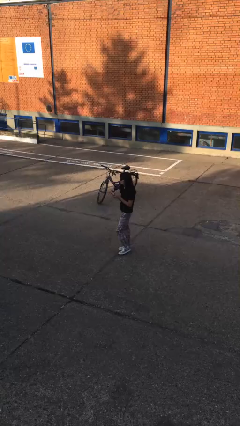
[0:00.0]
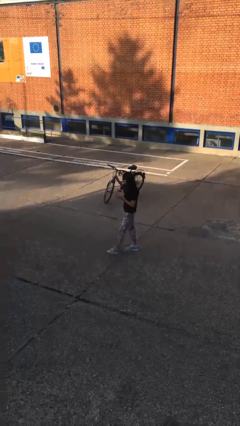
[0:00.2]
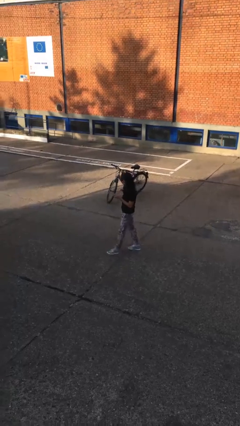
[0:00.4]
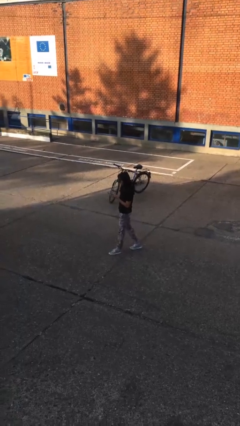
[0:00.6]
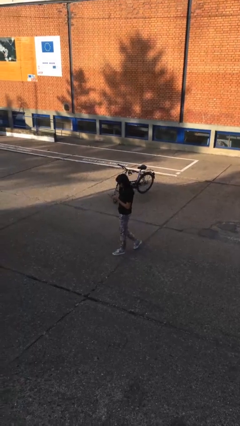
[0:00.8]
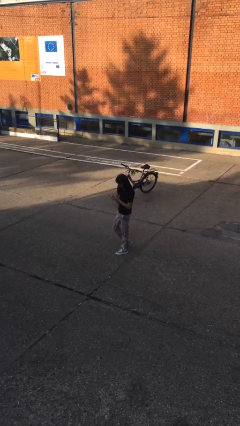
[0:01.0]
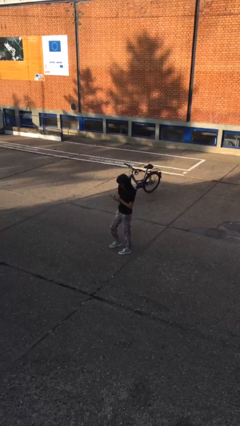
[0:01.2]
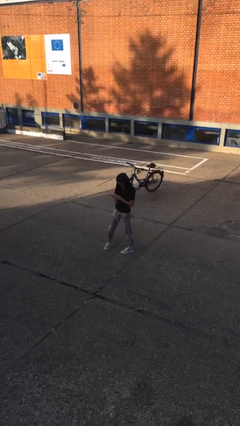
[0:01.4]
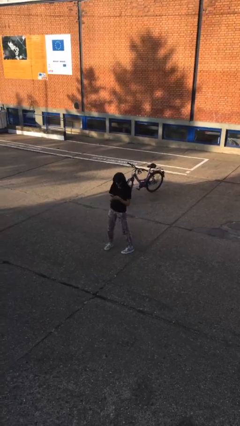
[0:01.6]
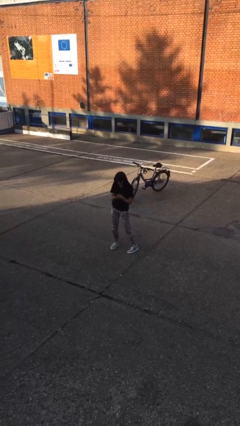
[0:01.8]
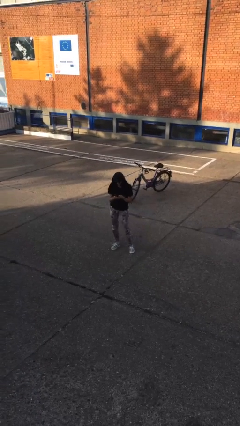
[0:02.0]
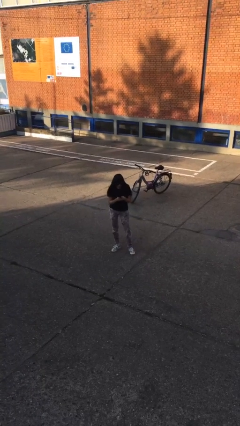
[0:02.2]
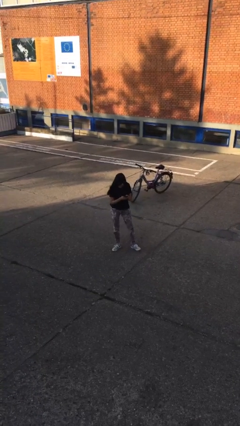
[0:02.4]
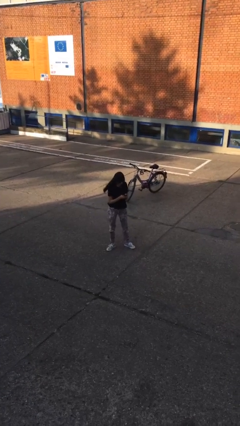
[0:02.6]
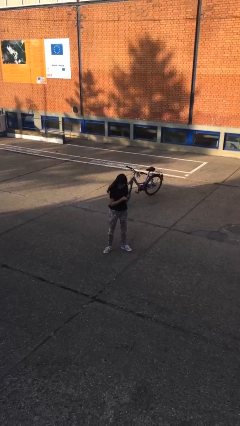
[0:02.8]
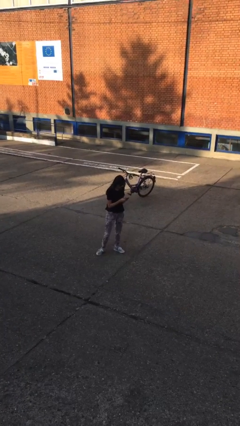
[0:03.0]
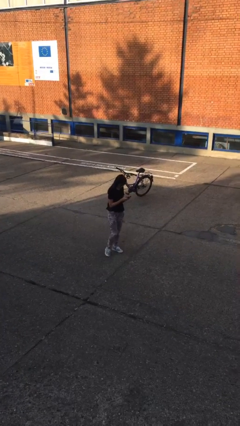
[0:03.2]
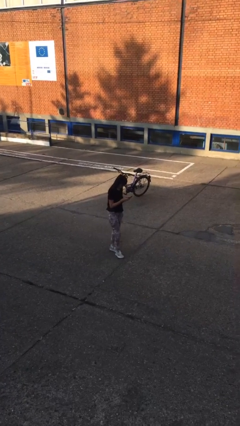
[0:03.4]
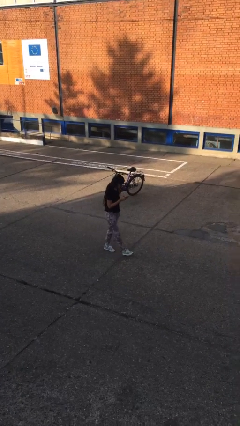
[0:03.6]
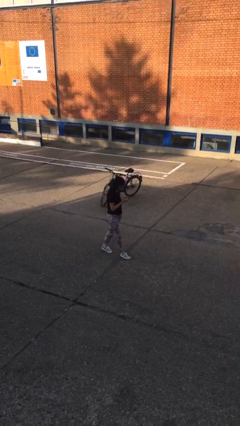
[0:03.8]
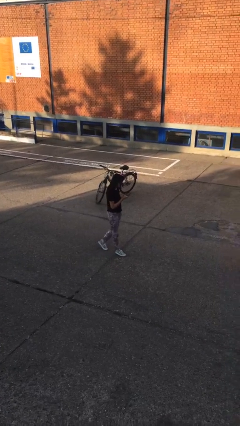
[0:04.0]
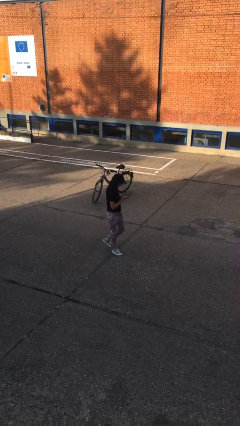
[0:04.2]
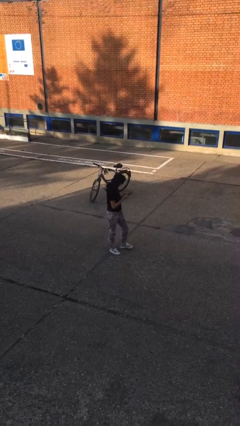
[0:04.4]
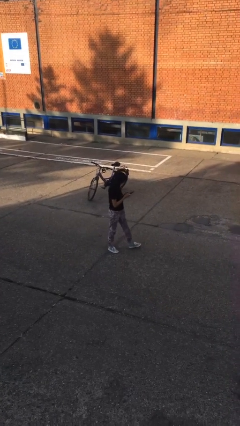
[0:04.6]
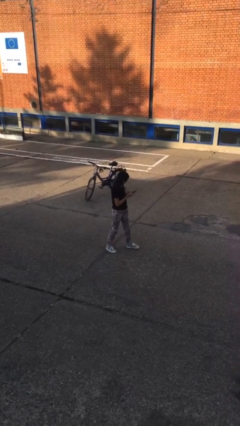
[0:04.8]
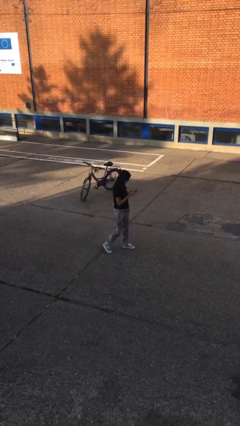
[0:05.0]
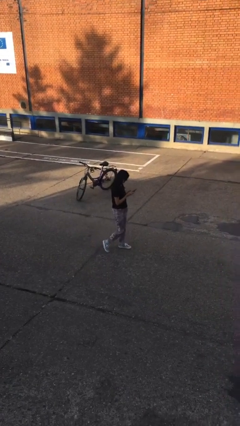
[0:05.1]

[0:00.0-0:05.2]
person texts on phone

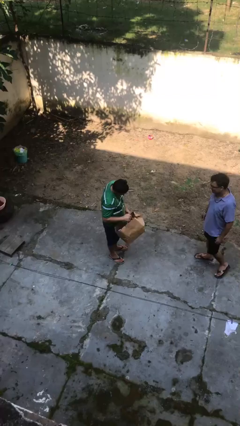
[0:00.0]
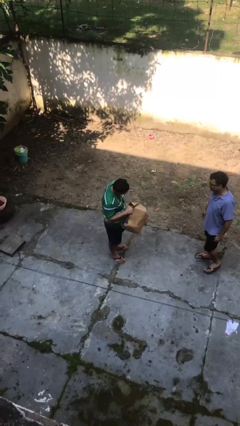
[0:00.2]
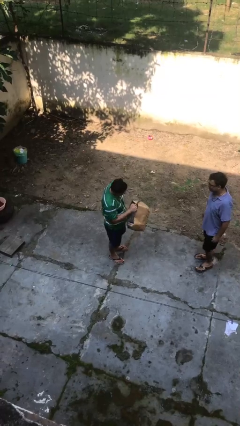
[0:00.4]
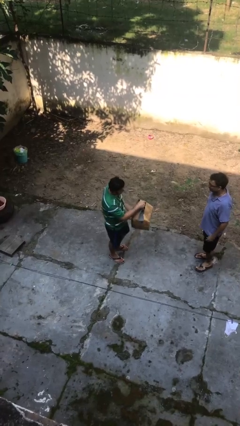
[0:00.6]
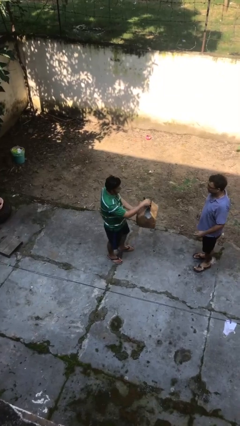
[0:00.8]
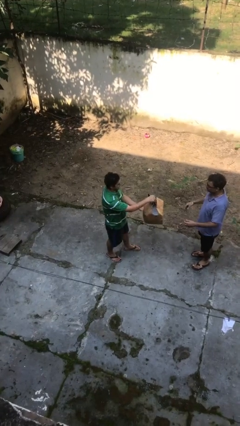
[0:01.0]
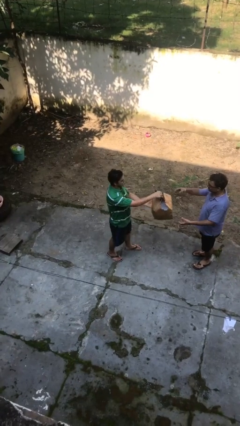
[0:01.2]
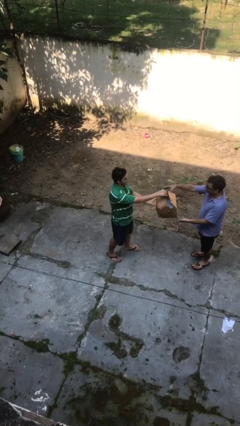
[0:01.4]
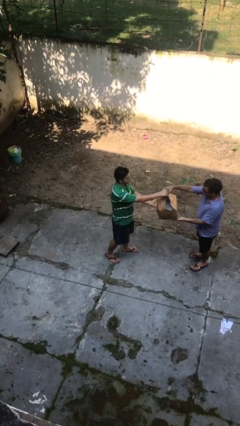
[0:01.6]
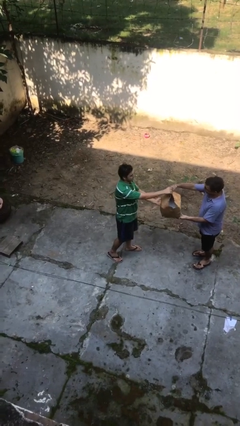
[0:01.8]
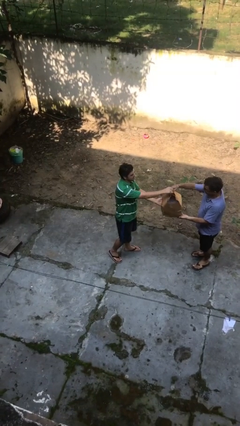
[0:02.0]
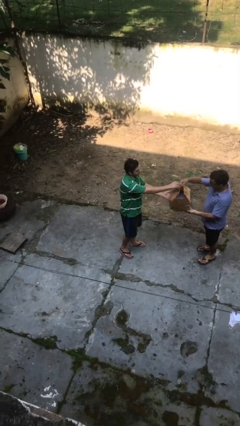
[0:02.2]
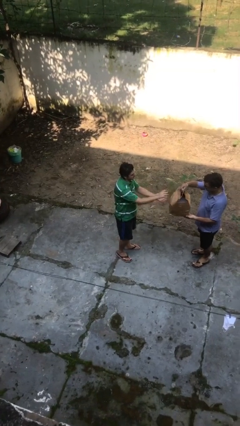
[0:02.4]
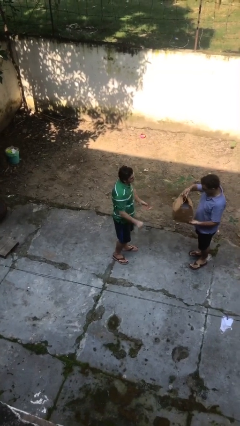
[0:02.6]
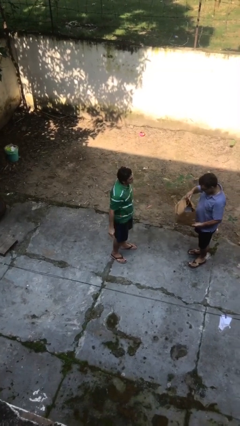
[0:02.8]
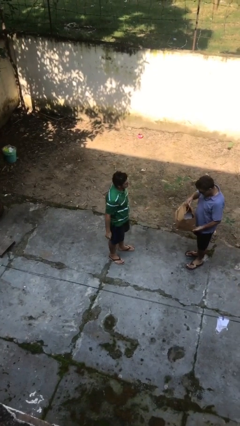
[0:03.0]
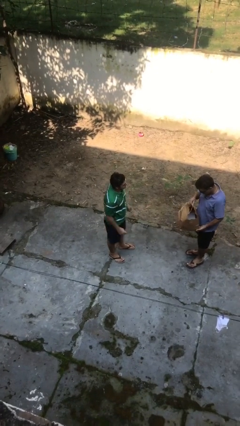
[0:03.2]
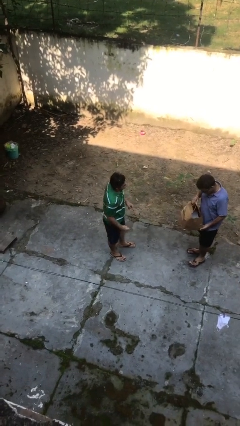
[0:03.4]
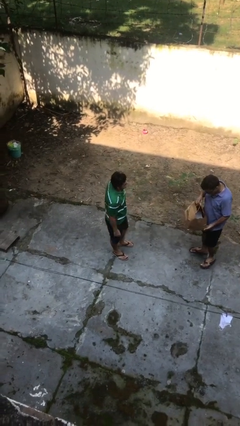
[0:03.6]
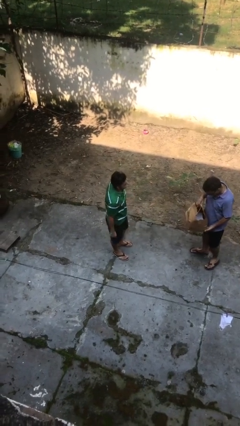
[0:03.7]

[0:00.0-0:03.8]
person transfers object to person

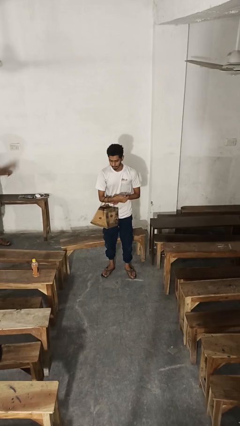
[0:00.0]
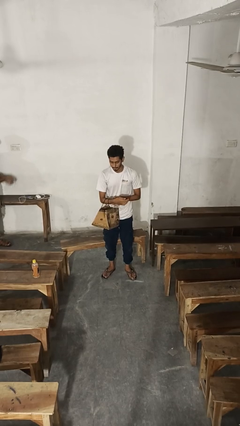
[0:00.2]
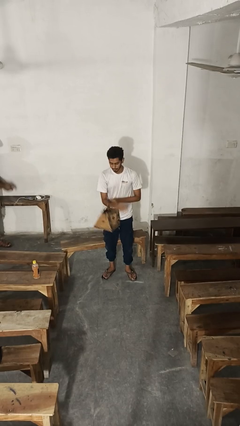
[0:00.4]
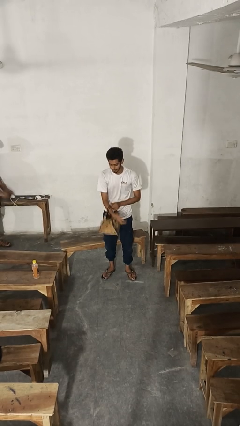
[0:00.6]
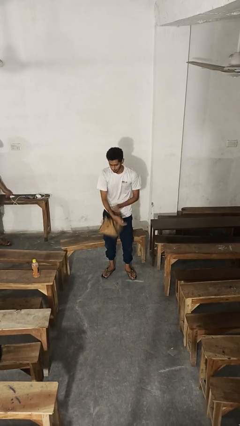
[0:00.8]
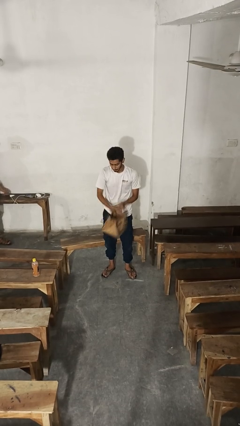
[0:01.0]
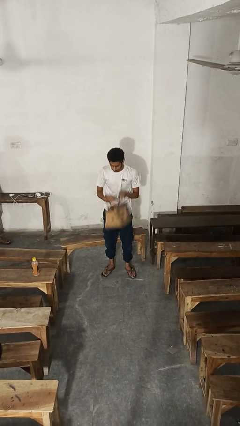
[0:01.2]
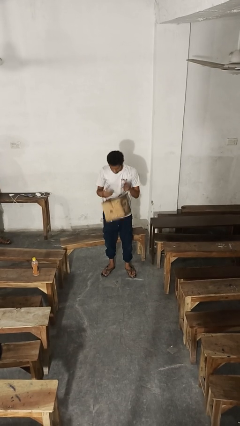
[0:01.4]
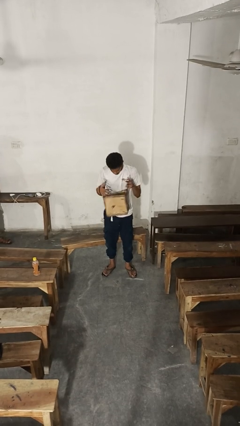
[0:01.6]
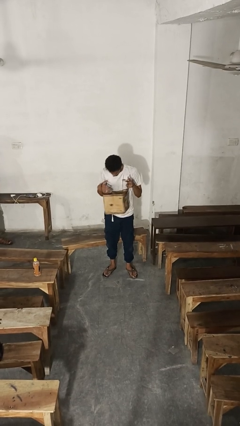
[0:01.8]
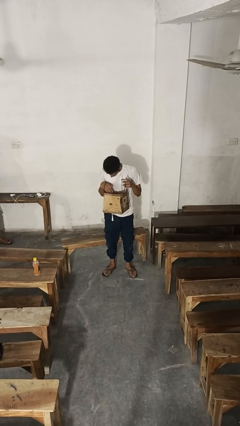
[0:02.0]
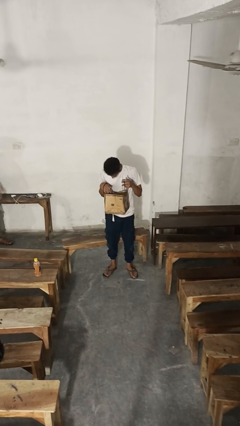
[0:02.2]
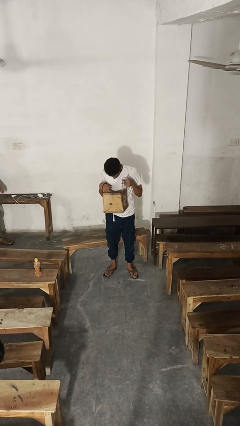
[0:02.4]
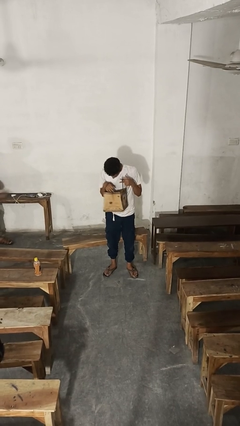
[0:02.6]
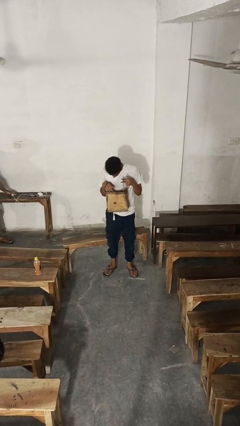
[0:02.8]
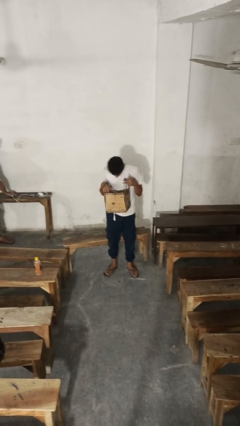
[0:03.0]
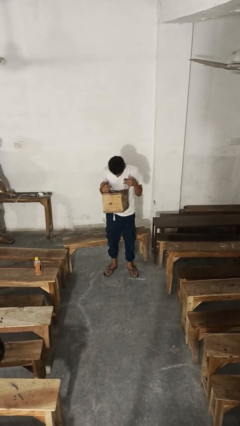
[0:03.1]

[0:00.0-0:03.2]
person searches in purse

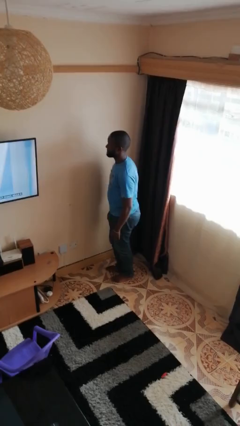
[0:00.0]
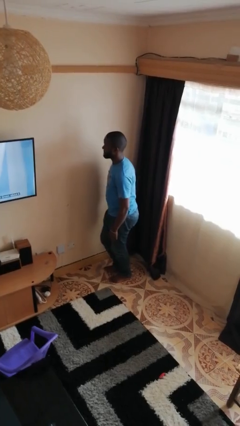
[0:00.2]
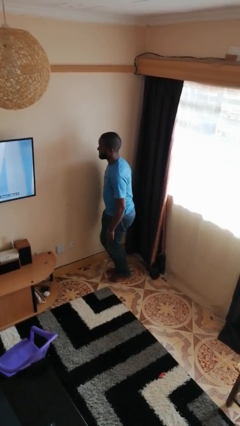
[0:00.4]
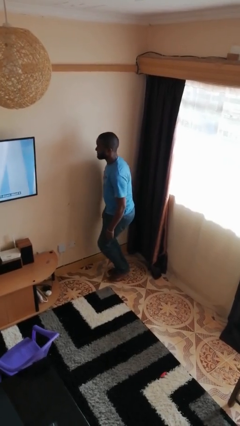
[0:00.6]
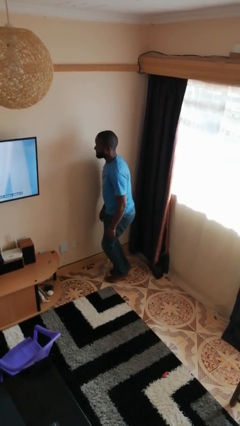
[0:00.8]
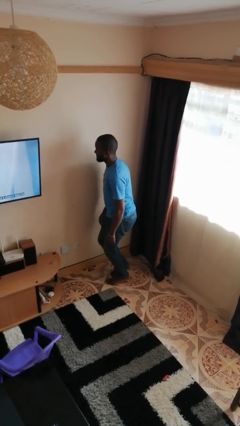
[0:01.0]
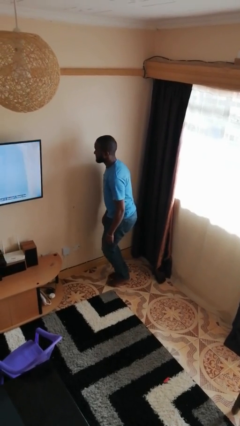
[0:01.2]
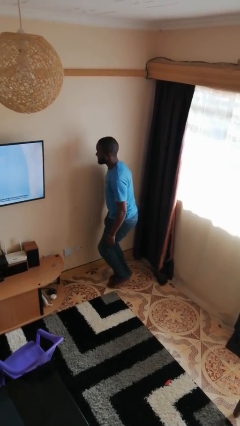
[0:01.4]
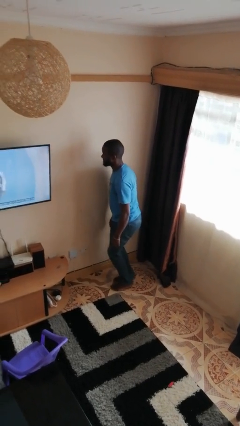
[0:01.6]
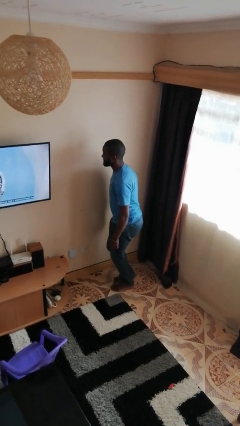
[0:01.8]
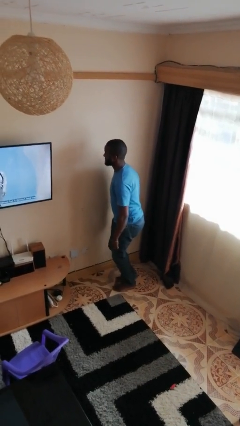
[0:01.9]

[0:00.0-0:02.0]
person walks tiptoe

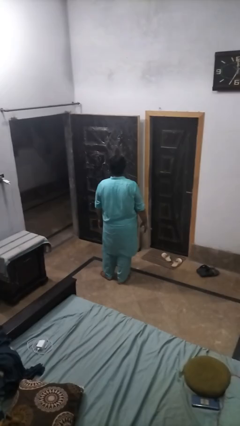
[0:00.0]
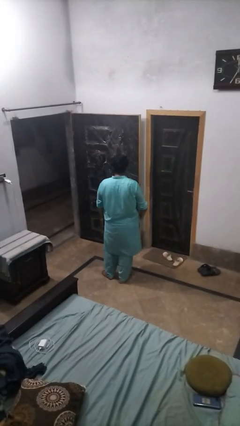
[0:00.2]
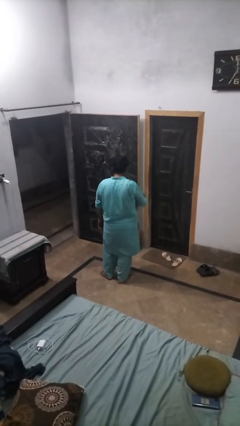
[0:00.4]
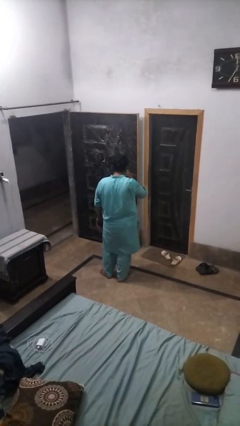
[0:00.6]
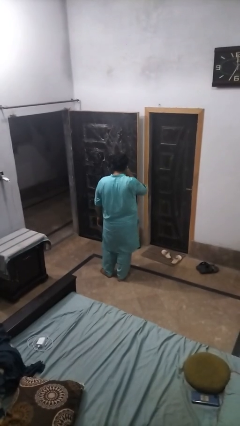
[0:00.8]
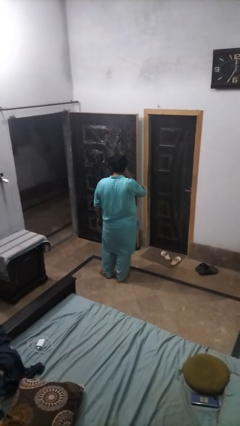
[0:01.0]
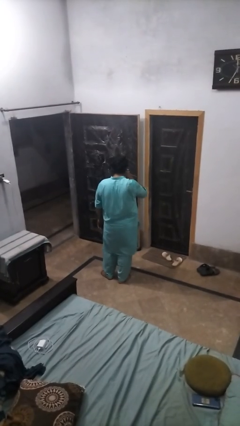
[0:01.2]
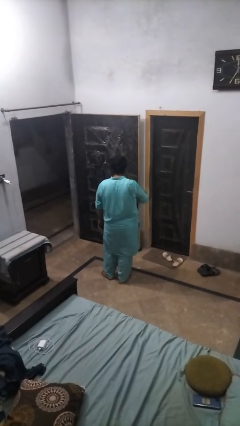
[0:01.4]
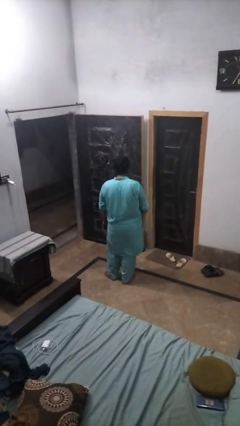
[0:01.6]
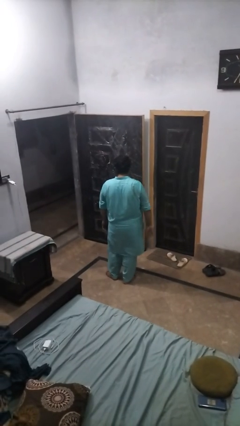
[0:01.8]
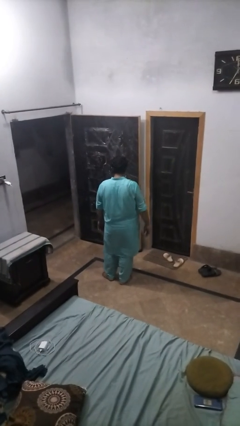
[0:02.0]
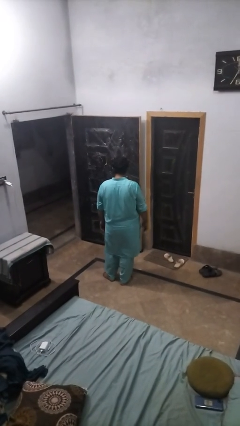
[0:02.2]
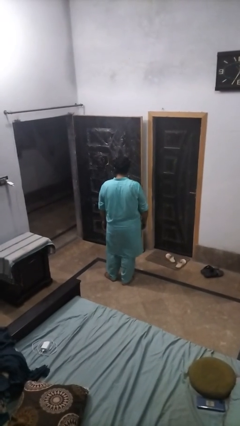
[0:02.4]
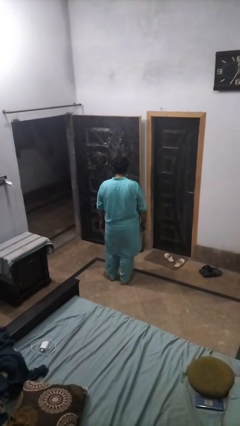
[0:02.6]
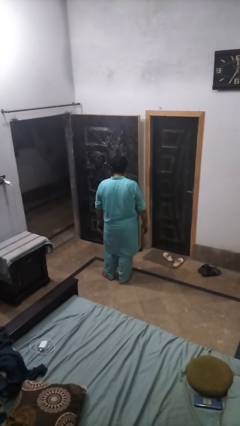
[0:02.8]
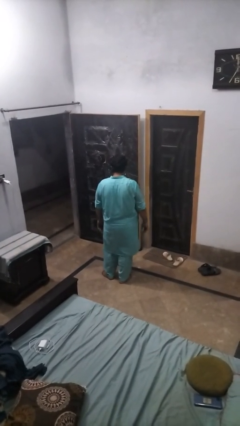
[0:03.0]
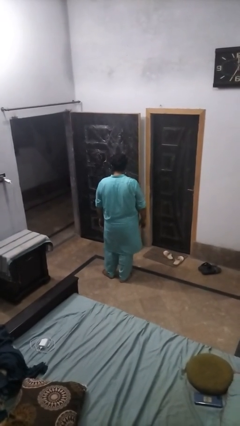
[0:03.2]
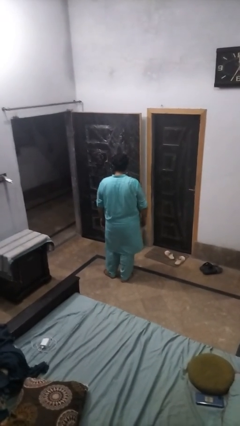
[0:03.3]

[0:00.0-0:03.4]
person vapes
